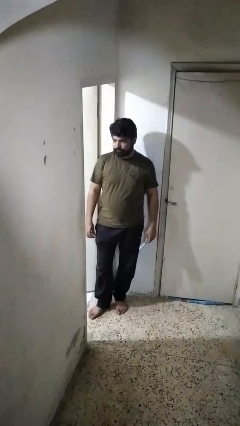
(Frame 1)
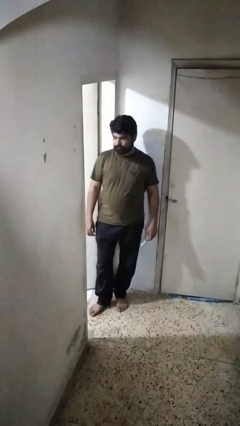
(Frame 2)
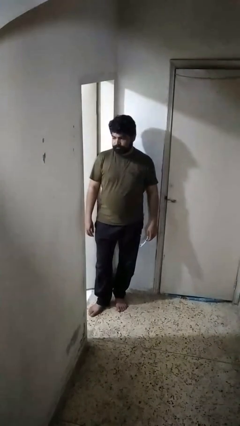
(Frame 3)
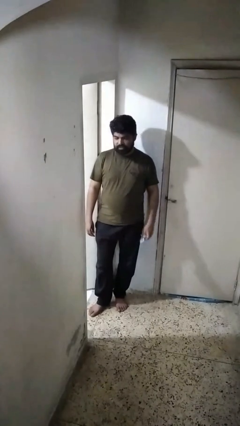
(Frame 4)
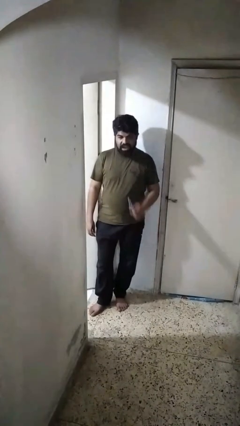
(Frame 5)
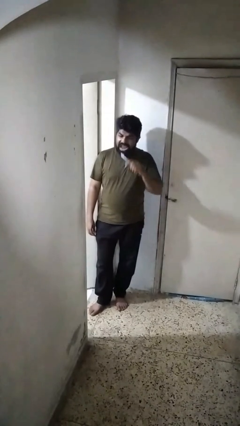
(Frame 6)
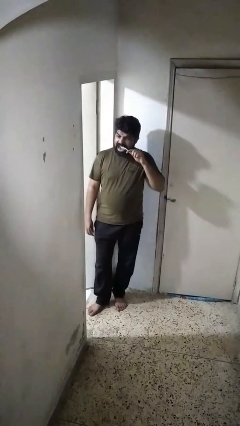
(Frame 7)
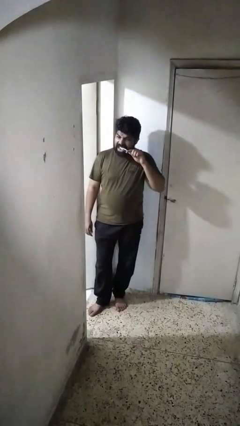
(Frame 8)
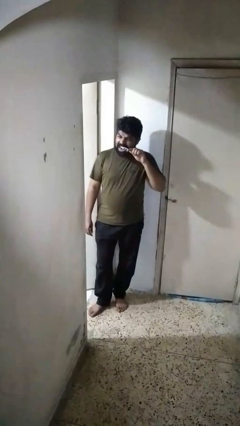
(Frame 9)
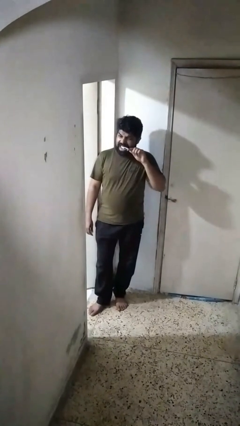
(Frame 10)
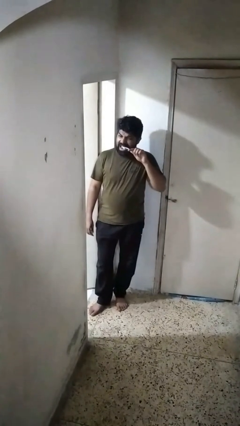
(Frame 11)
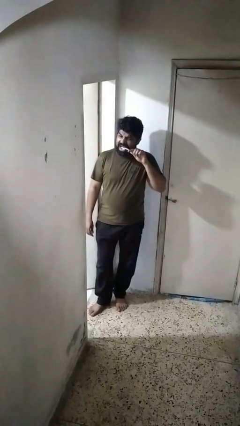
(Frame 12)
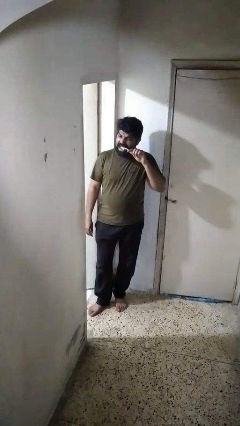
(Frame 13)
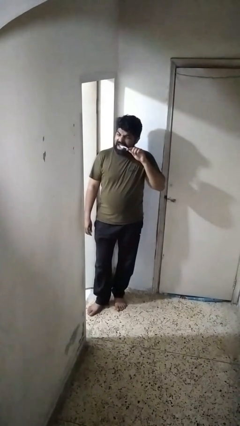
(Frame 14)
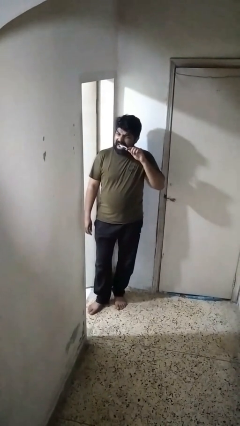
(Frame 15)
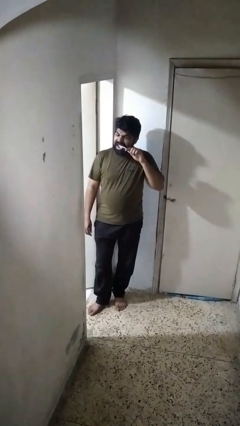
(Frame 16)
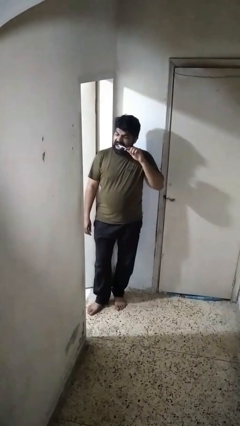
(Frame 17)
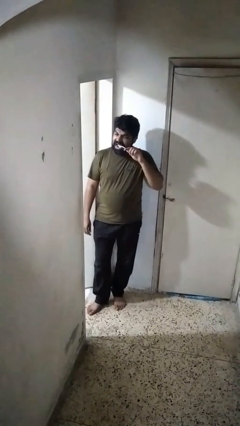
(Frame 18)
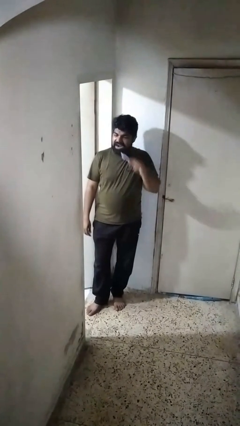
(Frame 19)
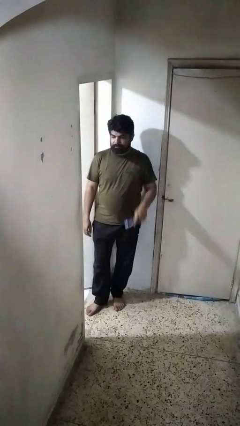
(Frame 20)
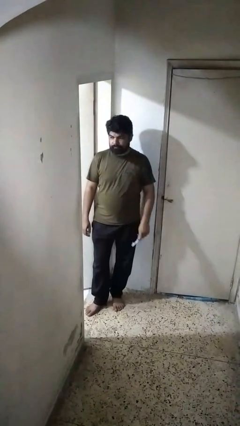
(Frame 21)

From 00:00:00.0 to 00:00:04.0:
person brushes teeth

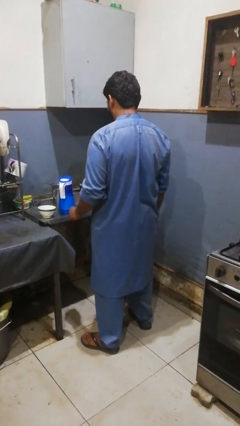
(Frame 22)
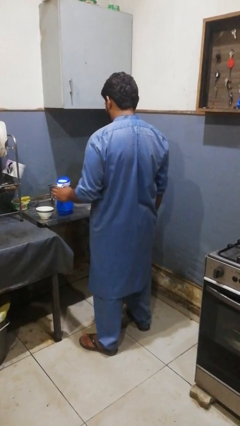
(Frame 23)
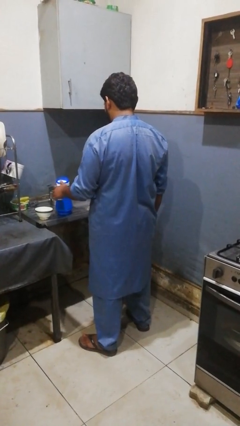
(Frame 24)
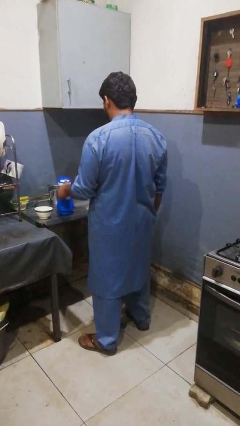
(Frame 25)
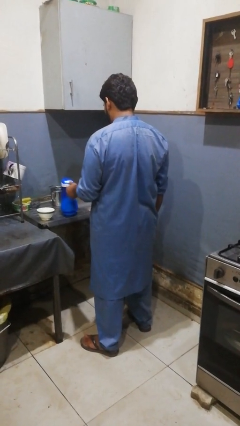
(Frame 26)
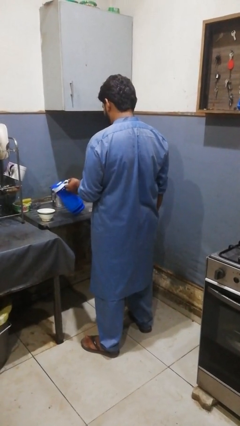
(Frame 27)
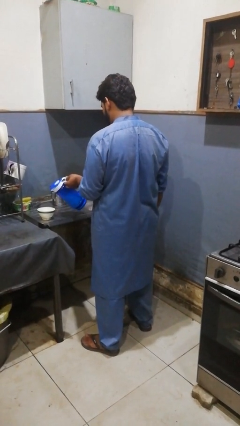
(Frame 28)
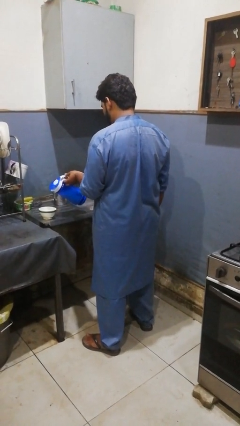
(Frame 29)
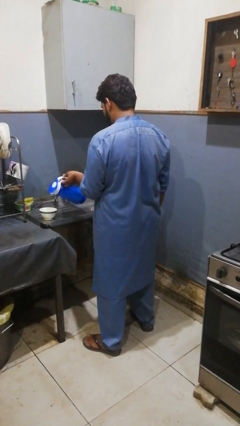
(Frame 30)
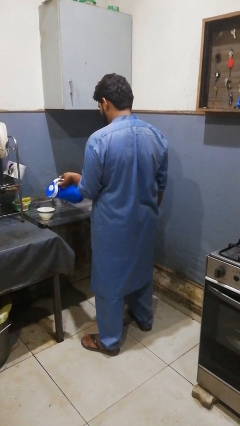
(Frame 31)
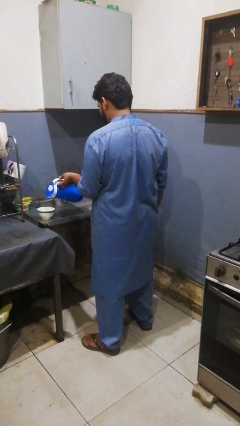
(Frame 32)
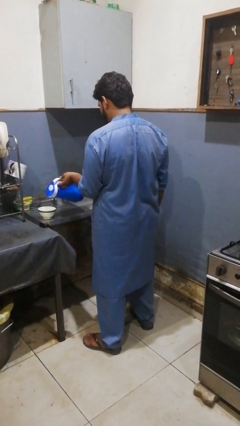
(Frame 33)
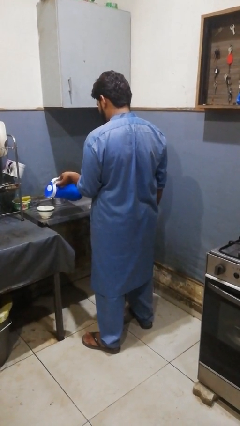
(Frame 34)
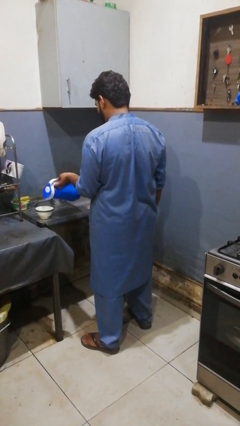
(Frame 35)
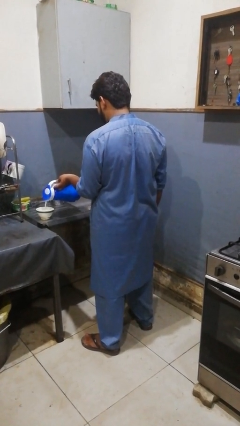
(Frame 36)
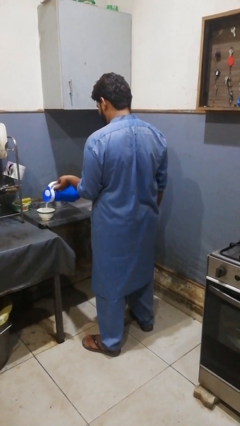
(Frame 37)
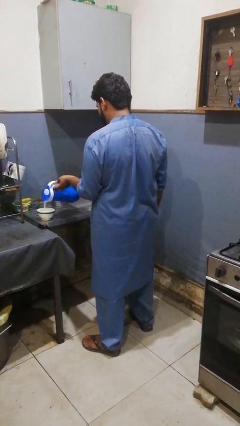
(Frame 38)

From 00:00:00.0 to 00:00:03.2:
person pours into bowl

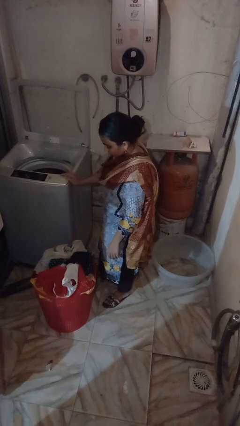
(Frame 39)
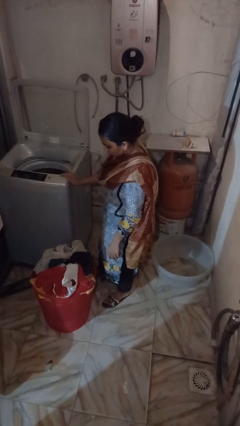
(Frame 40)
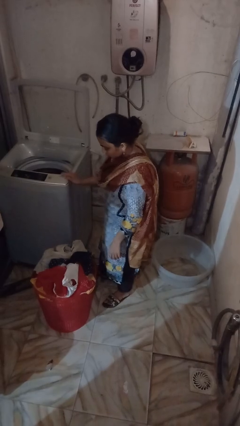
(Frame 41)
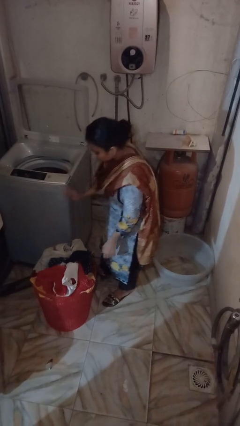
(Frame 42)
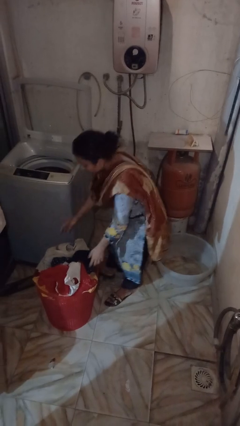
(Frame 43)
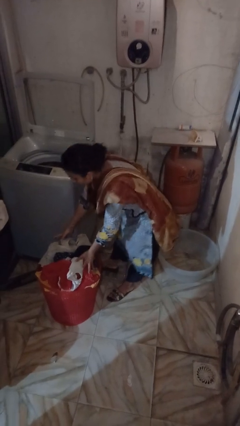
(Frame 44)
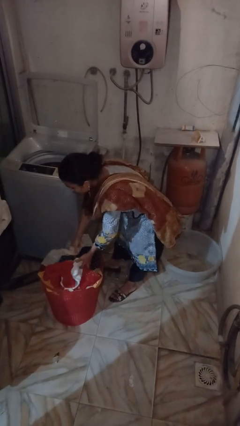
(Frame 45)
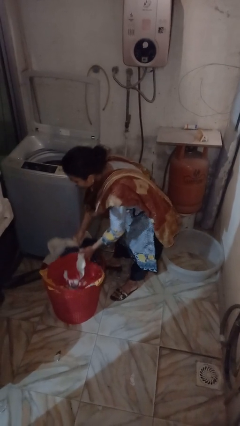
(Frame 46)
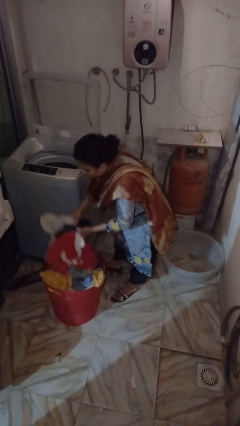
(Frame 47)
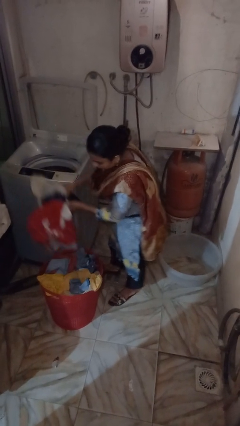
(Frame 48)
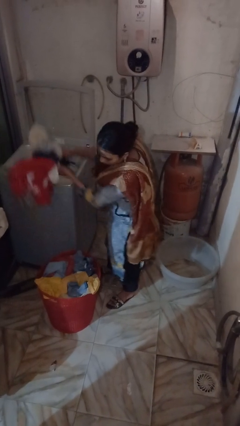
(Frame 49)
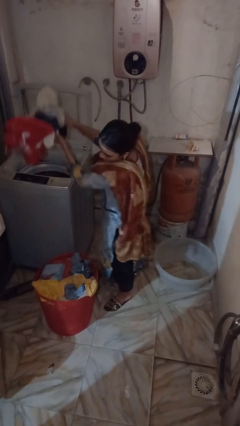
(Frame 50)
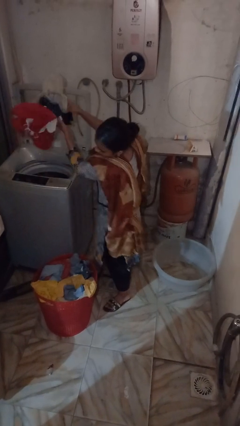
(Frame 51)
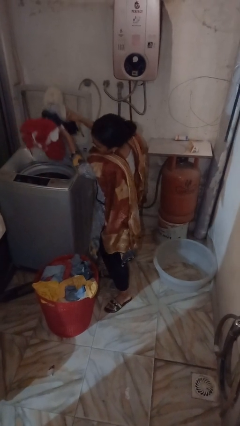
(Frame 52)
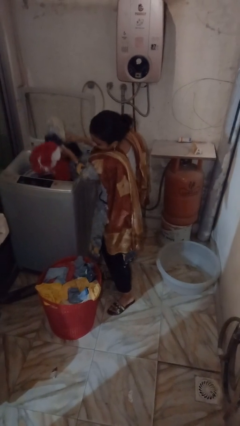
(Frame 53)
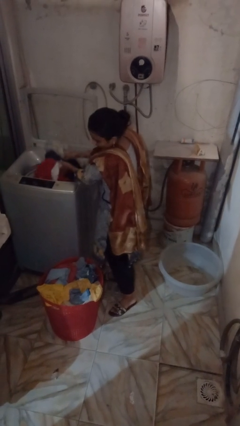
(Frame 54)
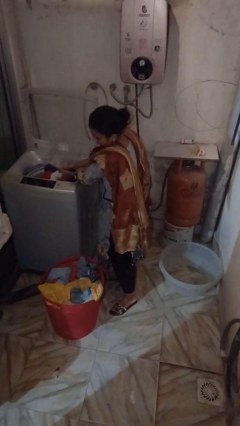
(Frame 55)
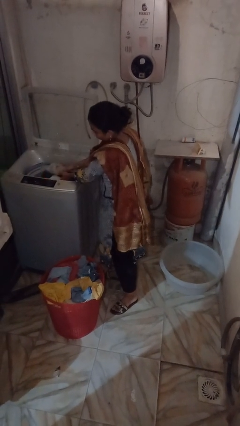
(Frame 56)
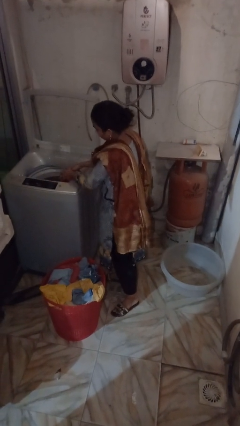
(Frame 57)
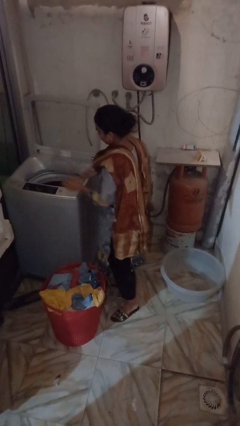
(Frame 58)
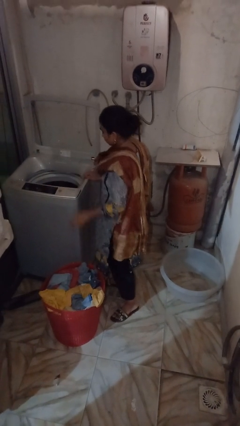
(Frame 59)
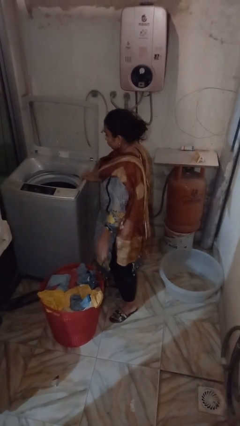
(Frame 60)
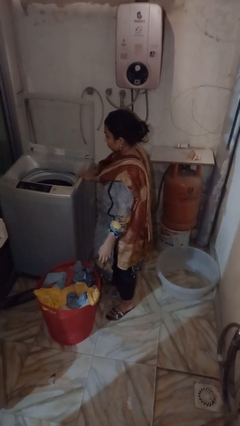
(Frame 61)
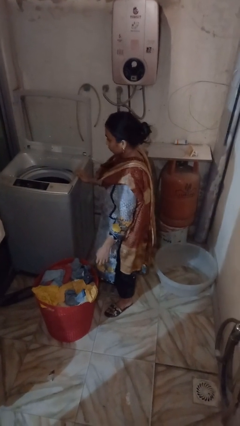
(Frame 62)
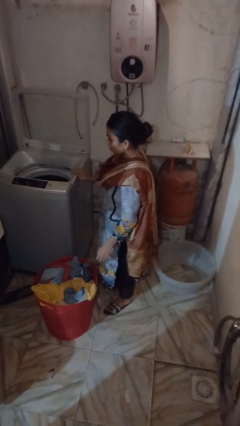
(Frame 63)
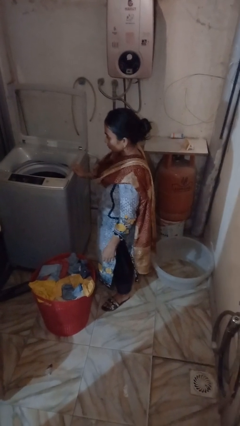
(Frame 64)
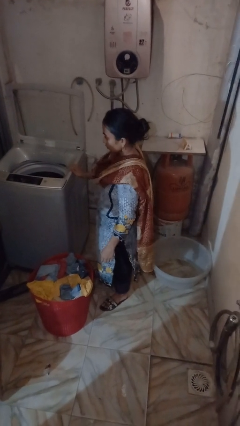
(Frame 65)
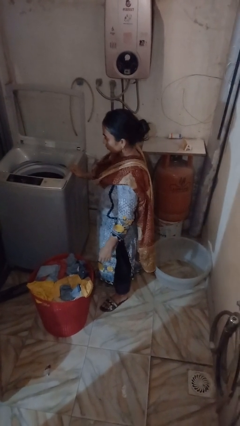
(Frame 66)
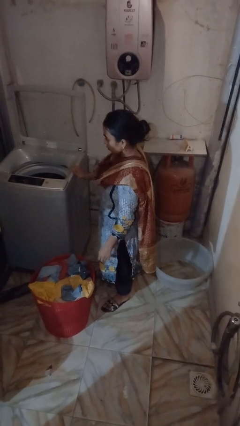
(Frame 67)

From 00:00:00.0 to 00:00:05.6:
person loads dryer

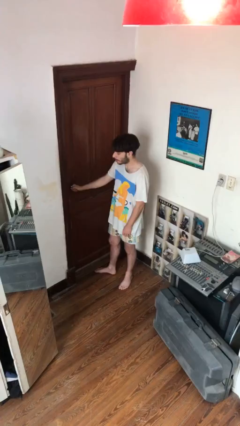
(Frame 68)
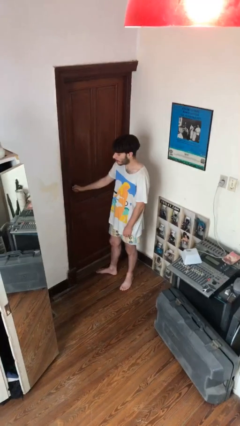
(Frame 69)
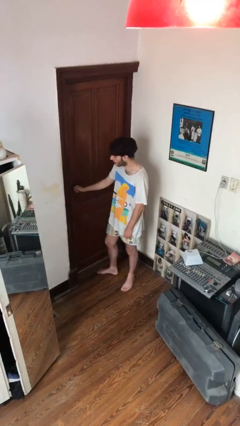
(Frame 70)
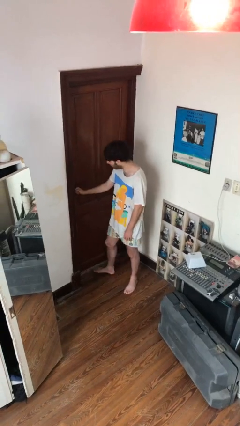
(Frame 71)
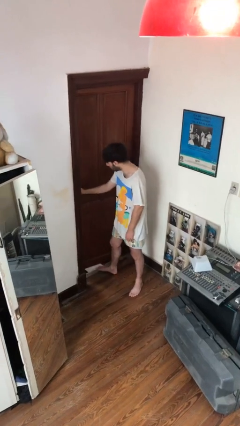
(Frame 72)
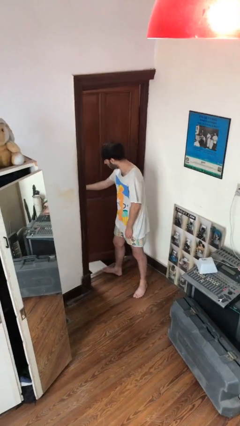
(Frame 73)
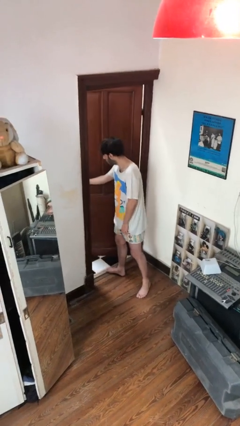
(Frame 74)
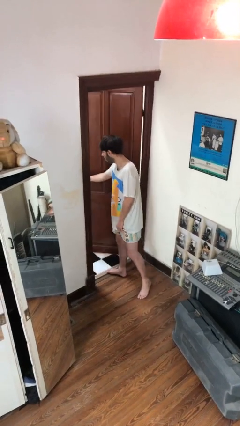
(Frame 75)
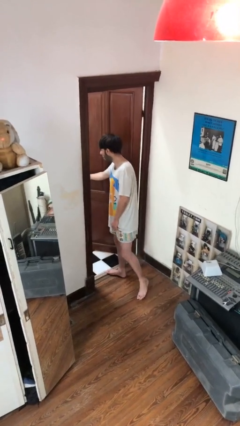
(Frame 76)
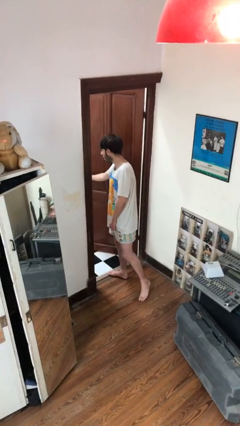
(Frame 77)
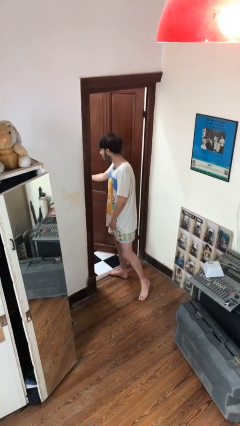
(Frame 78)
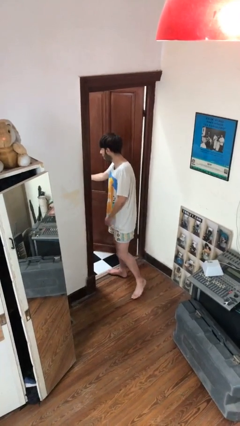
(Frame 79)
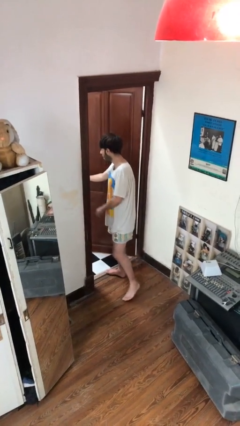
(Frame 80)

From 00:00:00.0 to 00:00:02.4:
person opens facility door

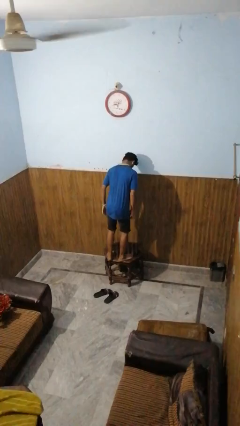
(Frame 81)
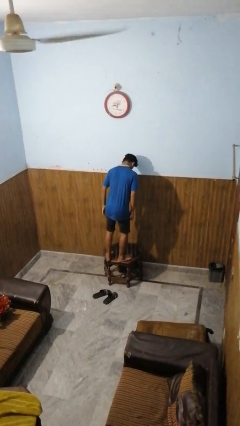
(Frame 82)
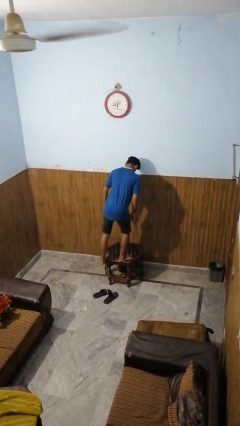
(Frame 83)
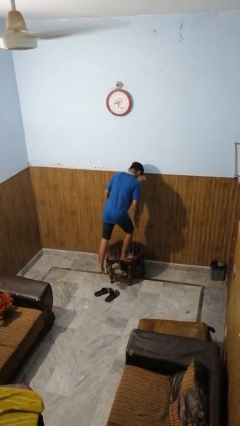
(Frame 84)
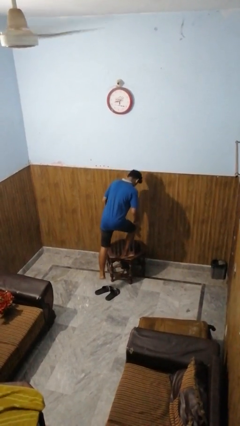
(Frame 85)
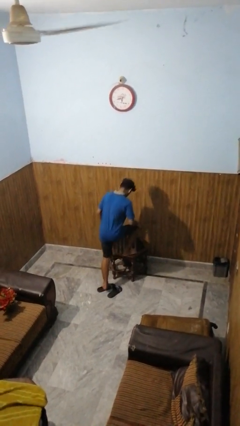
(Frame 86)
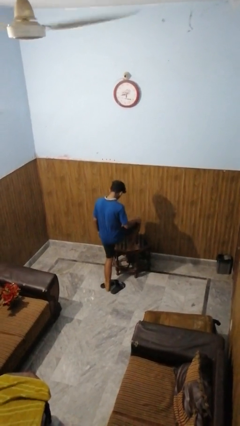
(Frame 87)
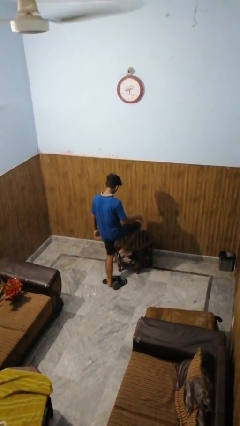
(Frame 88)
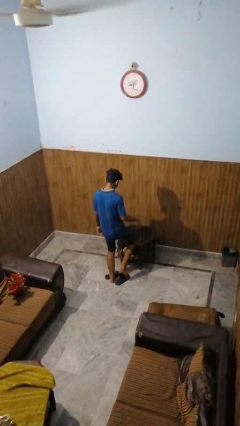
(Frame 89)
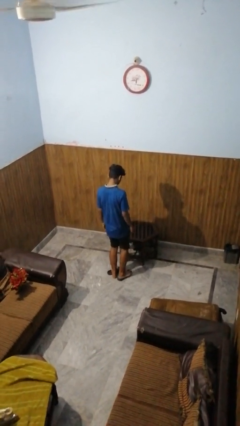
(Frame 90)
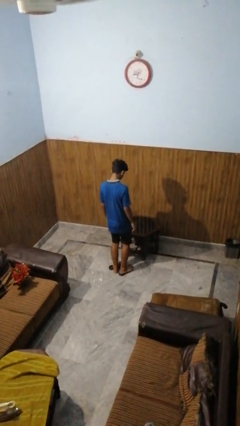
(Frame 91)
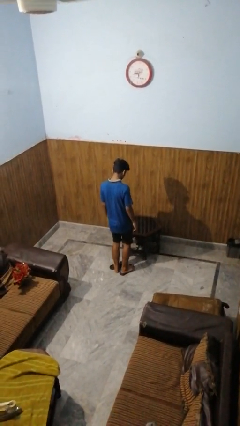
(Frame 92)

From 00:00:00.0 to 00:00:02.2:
person climbs off table

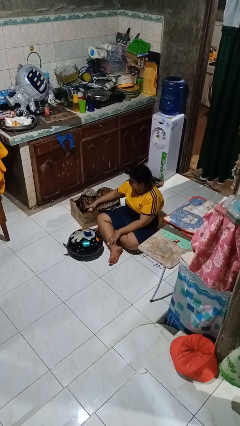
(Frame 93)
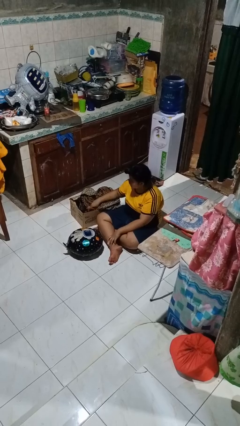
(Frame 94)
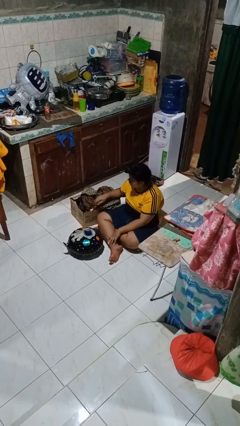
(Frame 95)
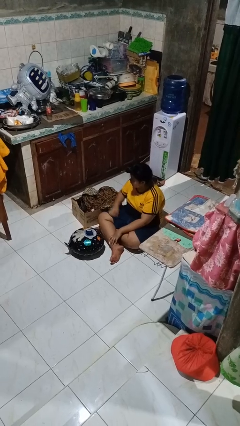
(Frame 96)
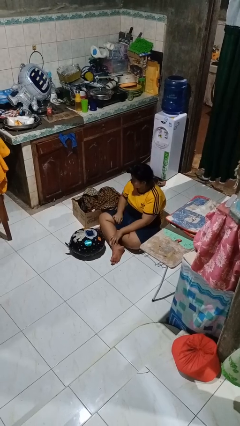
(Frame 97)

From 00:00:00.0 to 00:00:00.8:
person puts object into box
